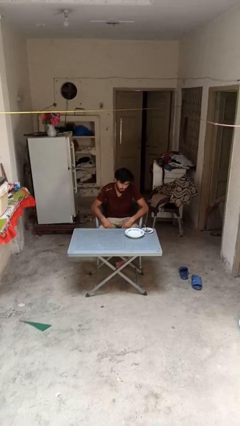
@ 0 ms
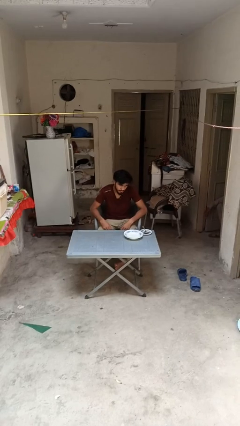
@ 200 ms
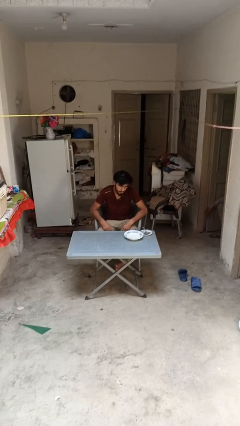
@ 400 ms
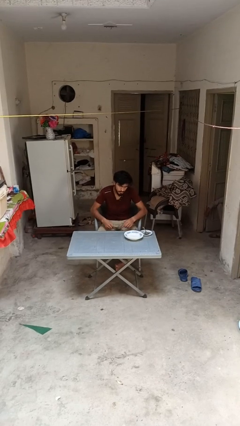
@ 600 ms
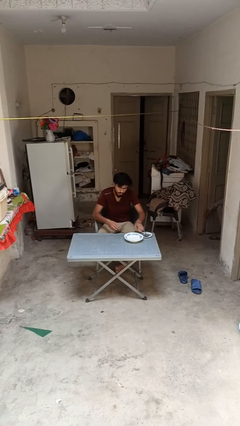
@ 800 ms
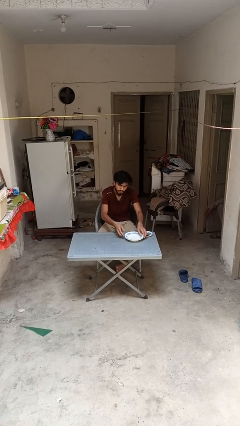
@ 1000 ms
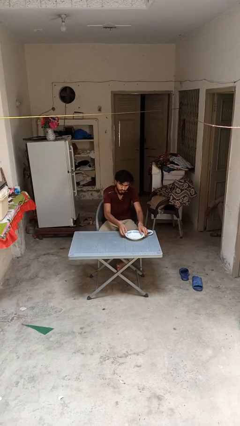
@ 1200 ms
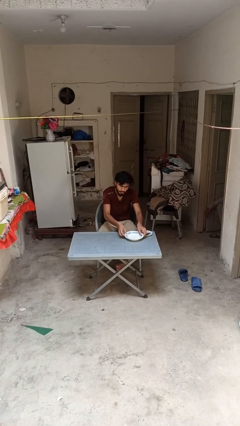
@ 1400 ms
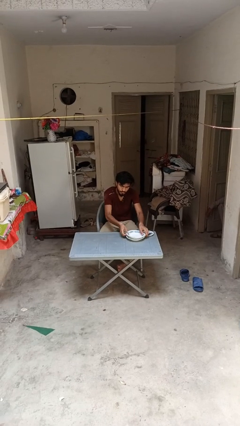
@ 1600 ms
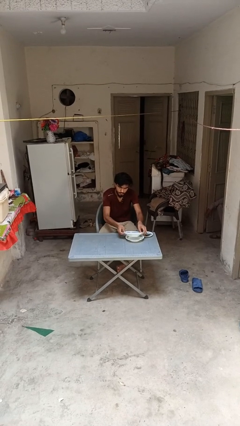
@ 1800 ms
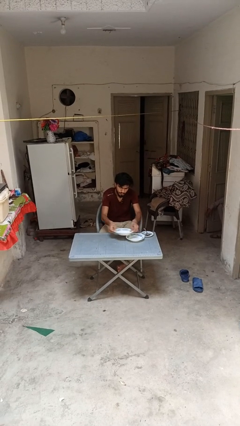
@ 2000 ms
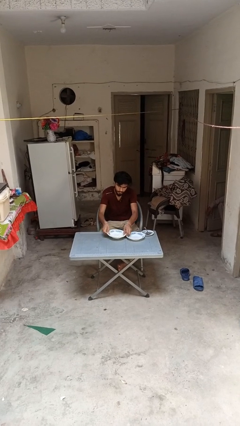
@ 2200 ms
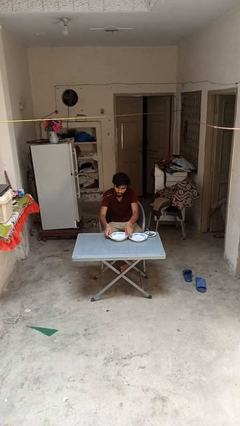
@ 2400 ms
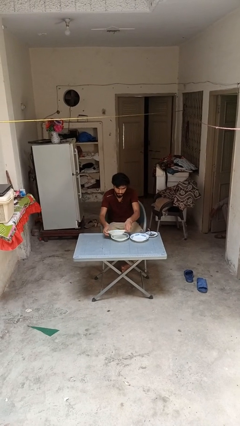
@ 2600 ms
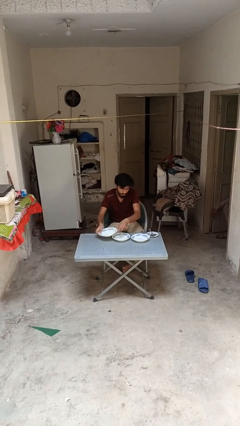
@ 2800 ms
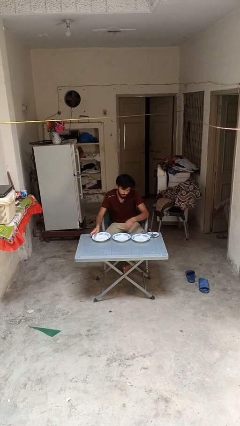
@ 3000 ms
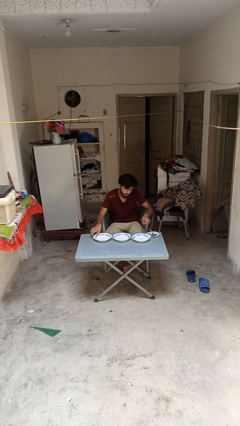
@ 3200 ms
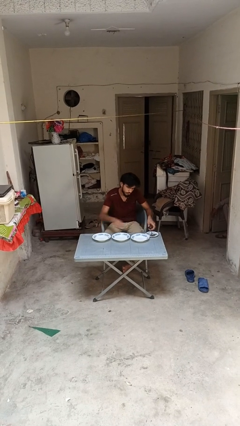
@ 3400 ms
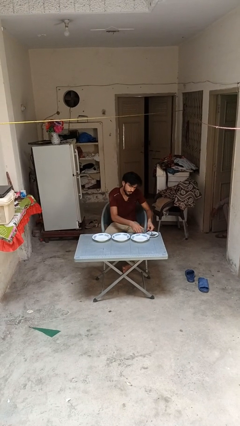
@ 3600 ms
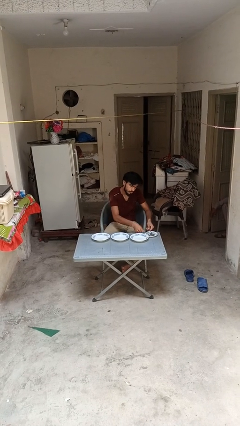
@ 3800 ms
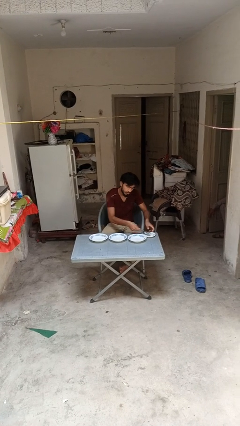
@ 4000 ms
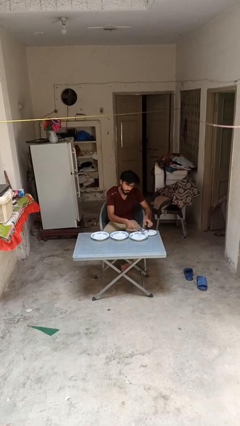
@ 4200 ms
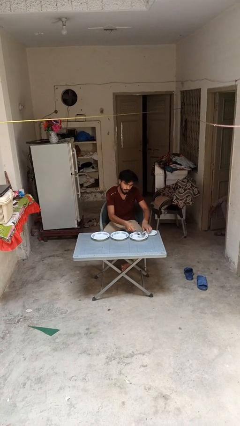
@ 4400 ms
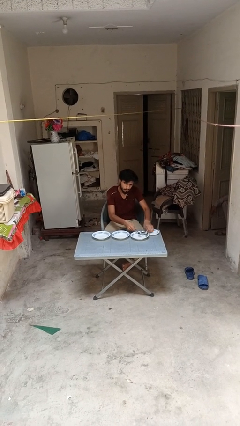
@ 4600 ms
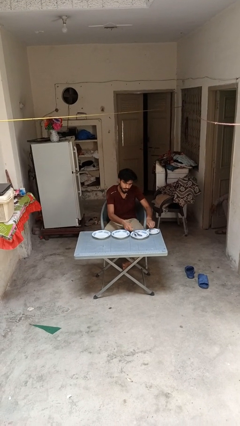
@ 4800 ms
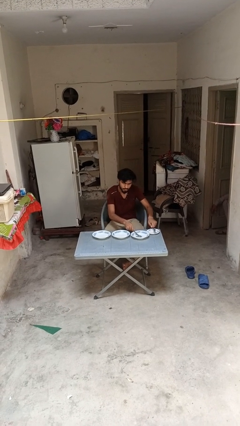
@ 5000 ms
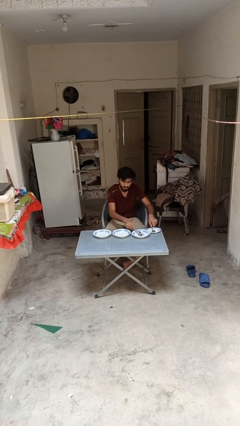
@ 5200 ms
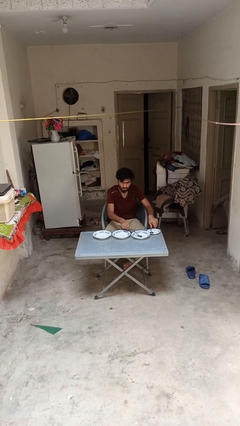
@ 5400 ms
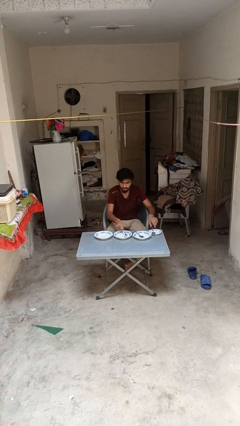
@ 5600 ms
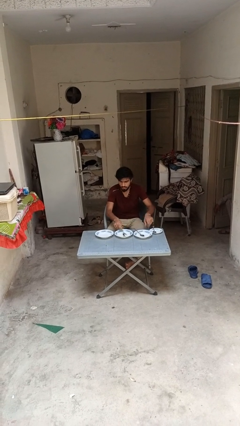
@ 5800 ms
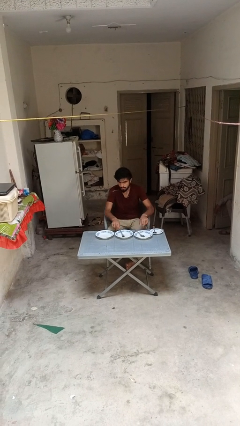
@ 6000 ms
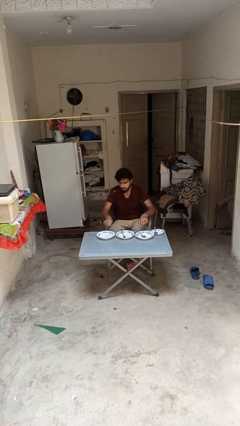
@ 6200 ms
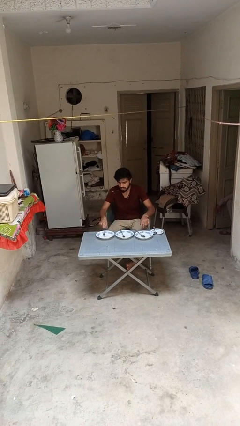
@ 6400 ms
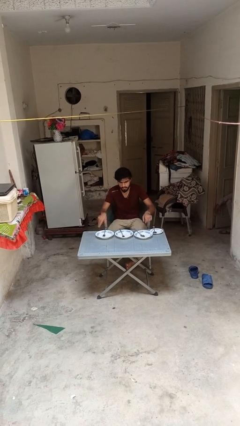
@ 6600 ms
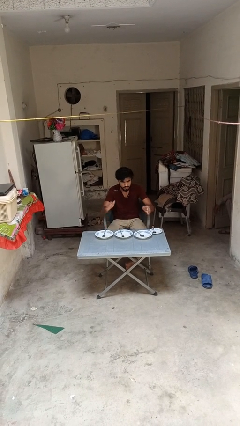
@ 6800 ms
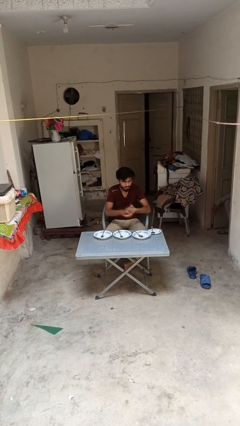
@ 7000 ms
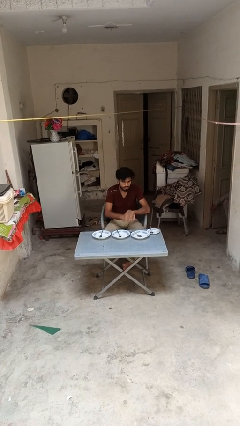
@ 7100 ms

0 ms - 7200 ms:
person sets table

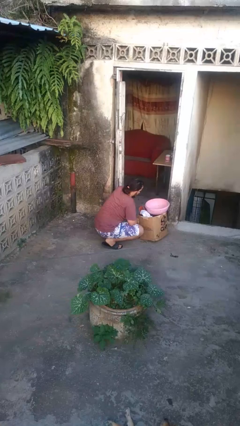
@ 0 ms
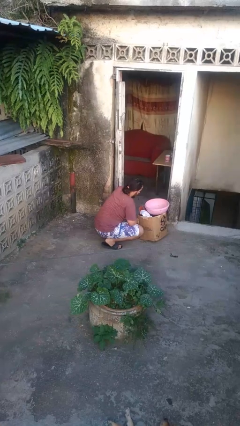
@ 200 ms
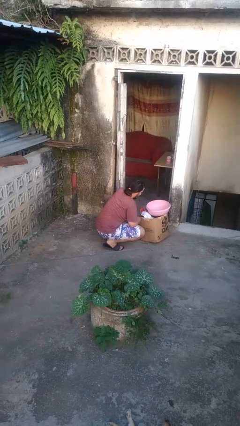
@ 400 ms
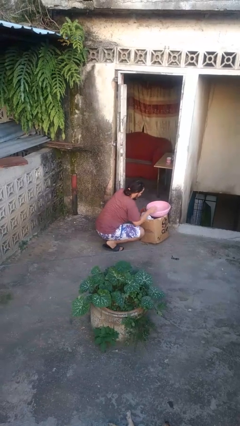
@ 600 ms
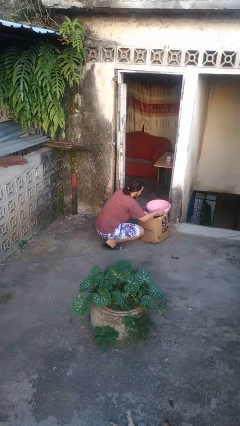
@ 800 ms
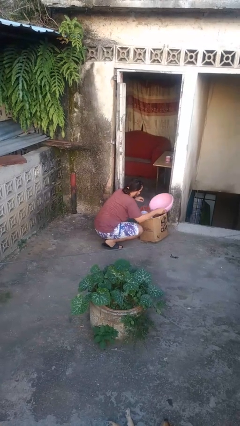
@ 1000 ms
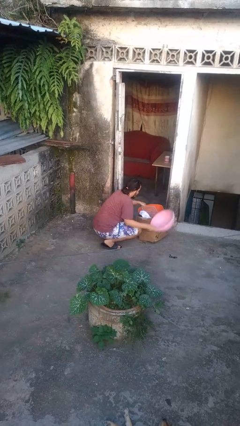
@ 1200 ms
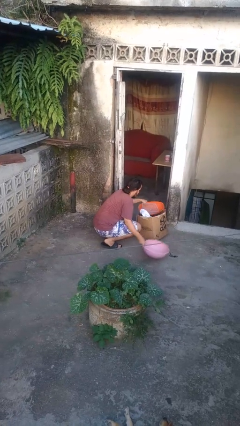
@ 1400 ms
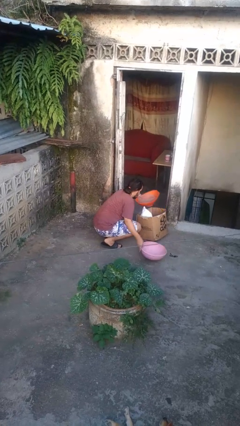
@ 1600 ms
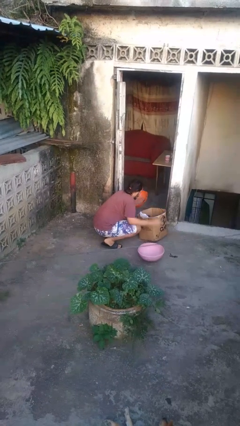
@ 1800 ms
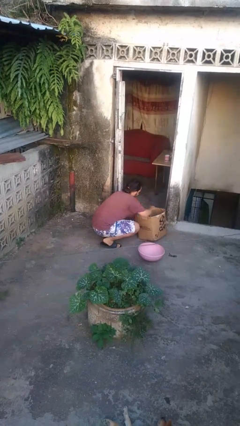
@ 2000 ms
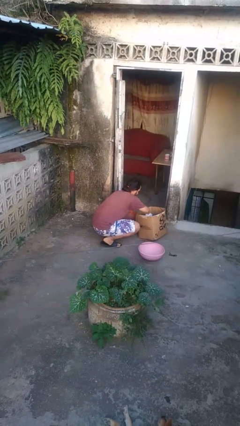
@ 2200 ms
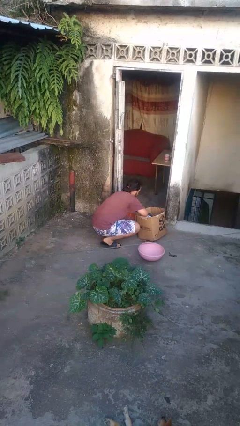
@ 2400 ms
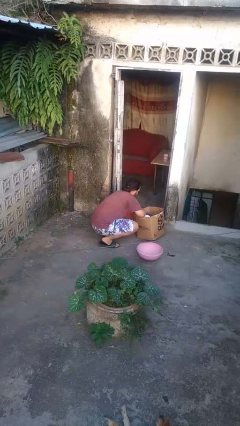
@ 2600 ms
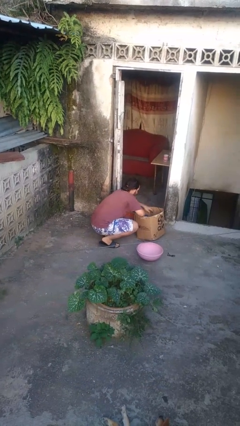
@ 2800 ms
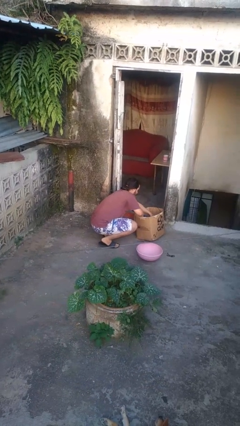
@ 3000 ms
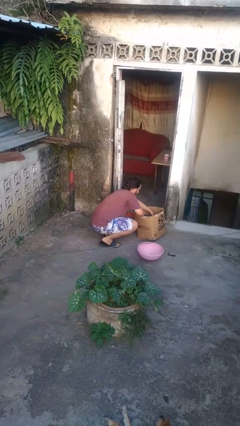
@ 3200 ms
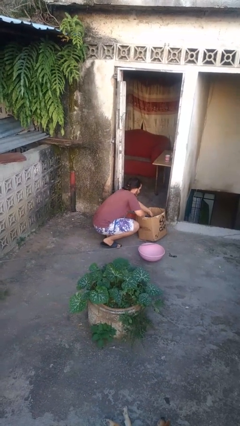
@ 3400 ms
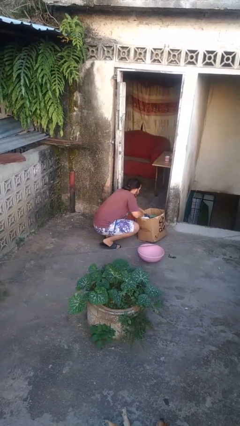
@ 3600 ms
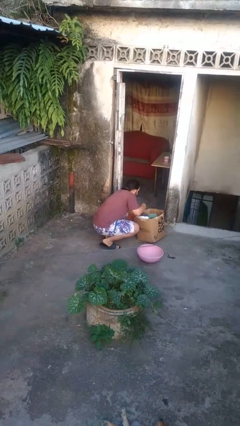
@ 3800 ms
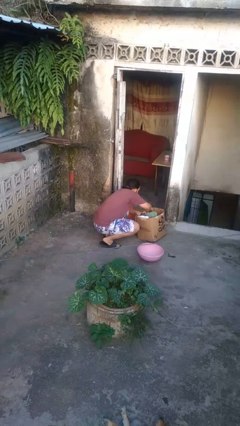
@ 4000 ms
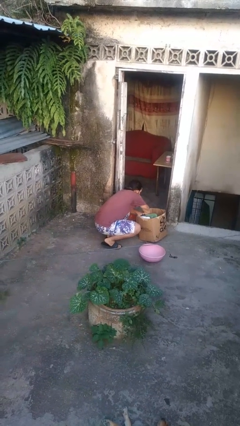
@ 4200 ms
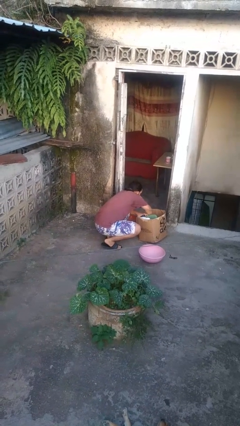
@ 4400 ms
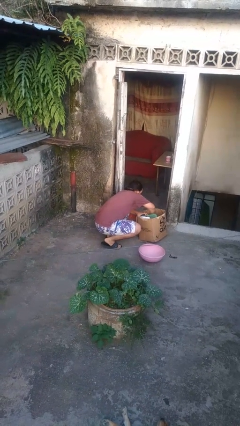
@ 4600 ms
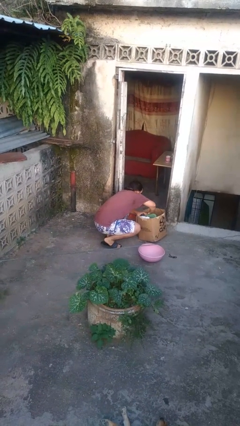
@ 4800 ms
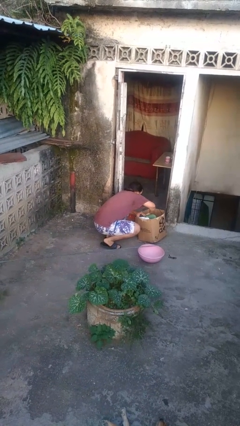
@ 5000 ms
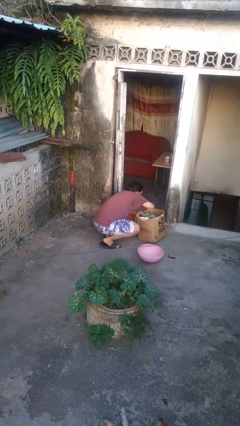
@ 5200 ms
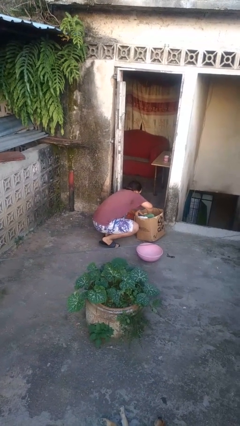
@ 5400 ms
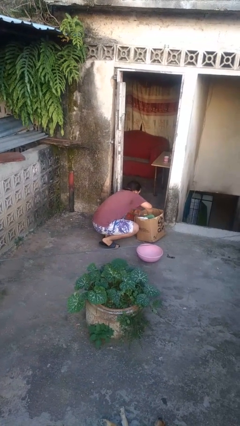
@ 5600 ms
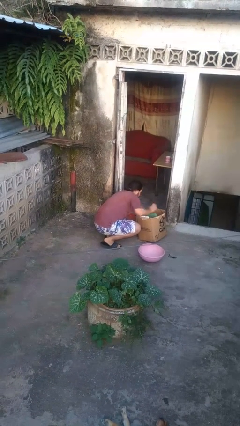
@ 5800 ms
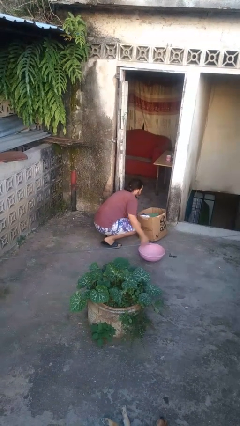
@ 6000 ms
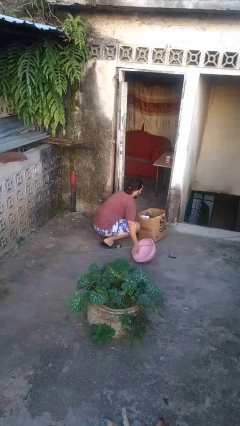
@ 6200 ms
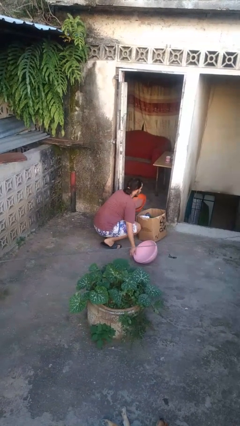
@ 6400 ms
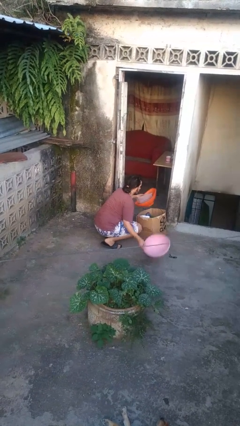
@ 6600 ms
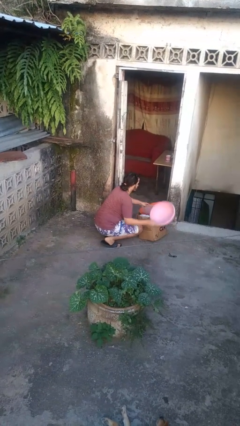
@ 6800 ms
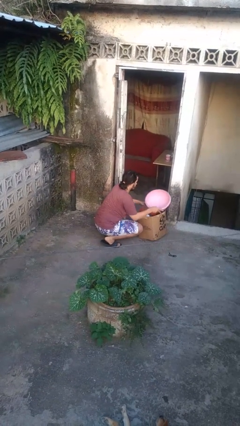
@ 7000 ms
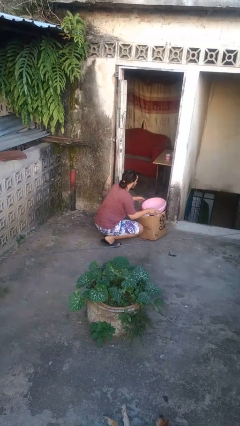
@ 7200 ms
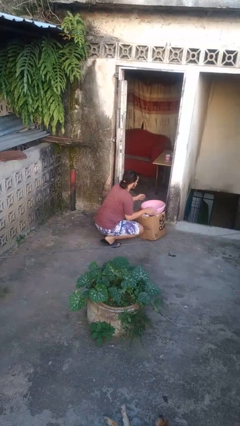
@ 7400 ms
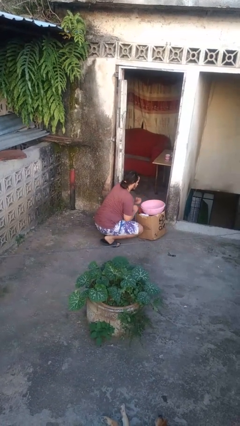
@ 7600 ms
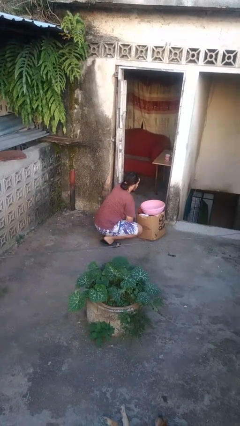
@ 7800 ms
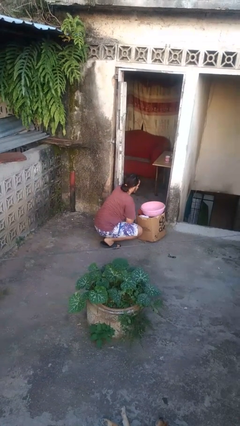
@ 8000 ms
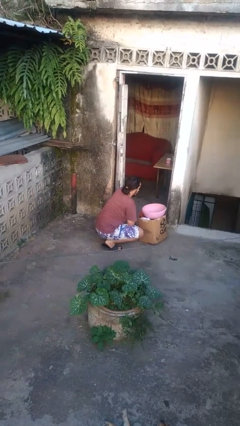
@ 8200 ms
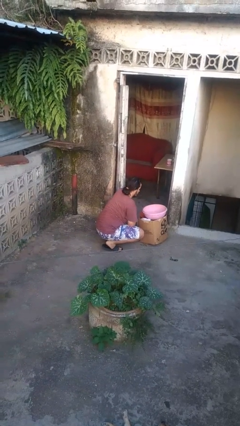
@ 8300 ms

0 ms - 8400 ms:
person searches in box

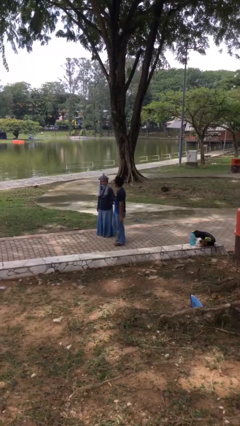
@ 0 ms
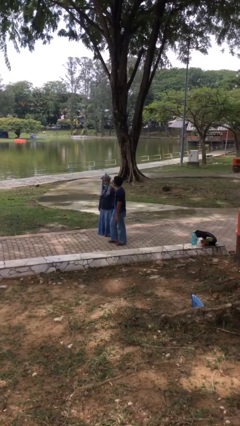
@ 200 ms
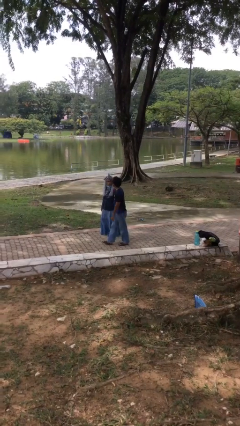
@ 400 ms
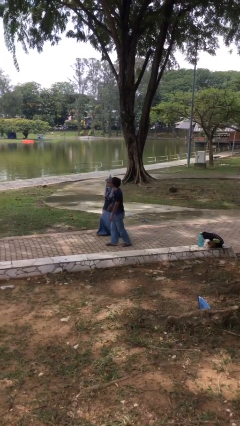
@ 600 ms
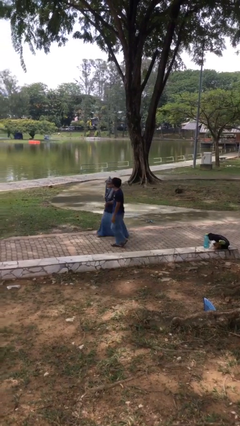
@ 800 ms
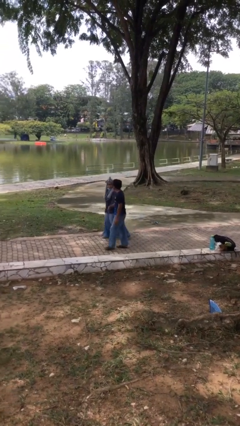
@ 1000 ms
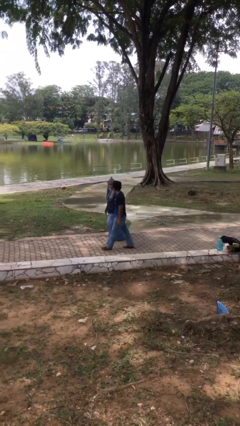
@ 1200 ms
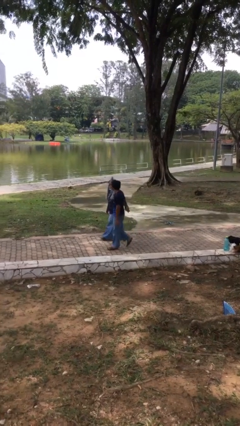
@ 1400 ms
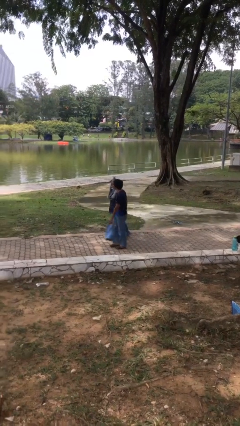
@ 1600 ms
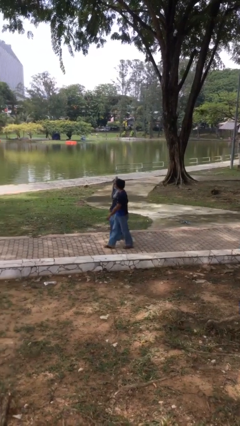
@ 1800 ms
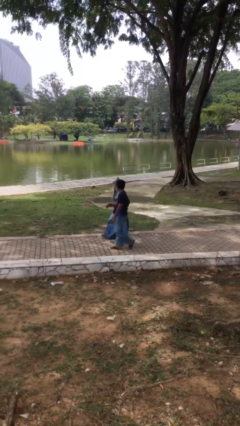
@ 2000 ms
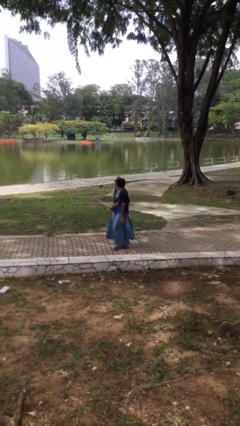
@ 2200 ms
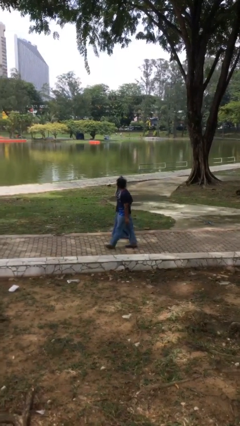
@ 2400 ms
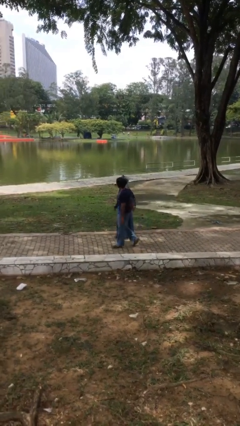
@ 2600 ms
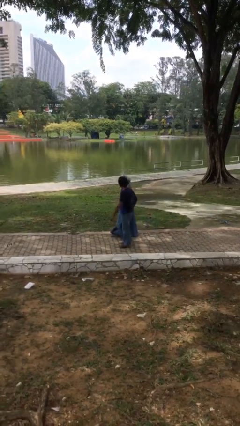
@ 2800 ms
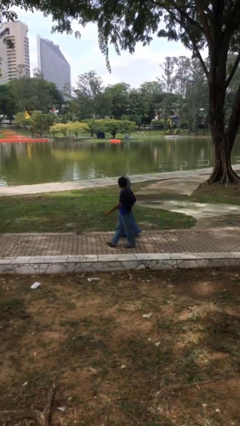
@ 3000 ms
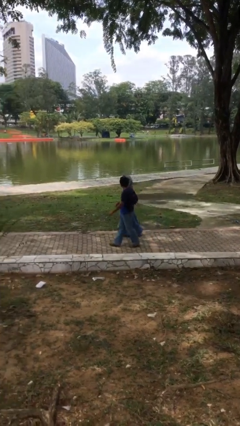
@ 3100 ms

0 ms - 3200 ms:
person holds hand
